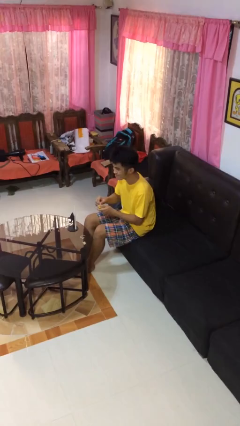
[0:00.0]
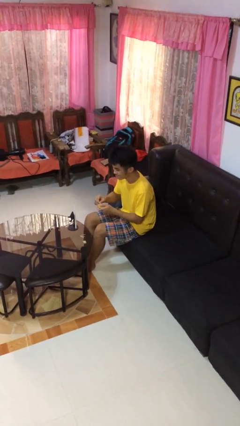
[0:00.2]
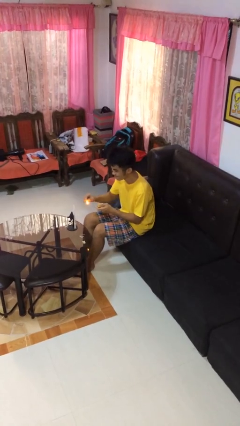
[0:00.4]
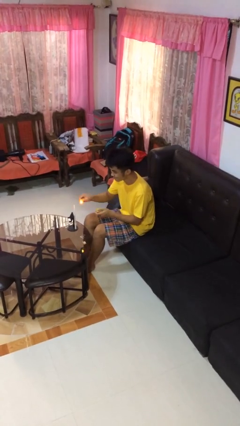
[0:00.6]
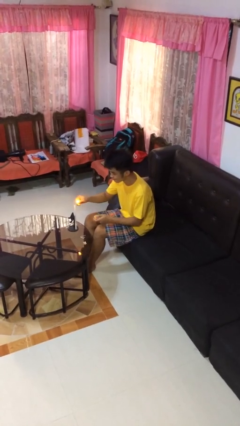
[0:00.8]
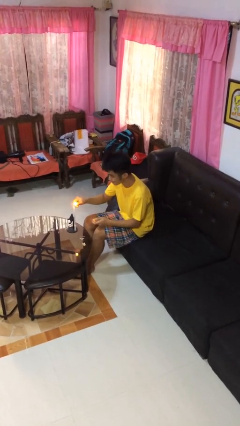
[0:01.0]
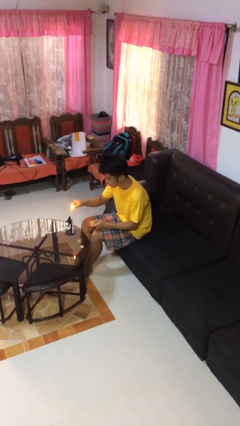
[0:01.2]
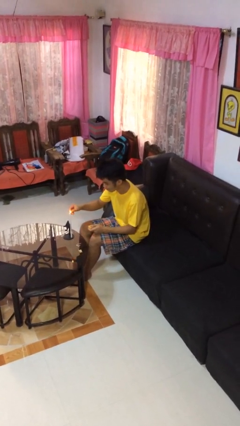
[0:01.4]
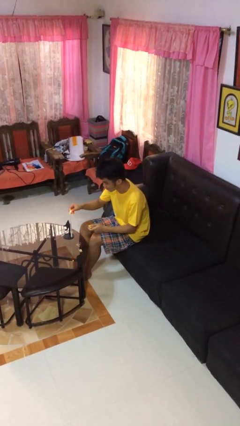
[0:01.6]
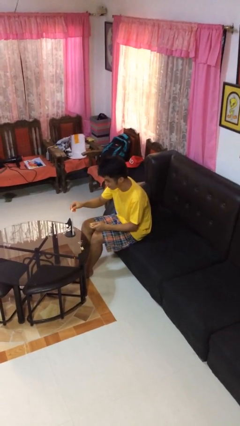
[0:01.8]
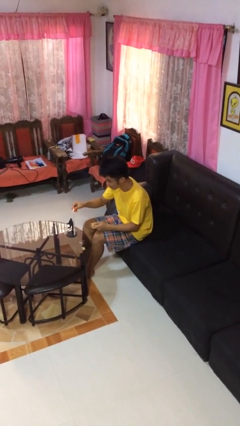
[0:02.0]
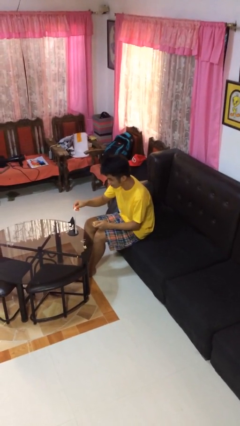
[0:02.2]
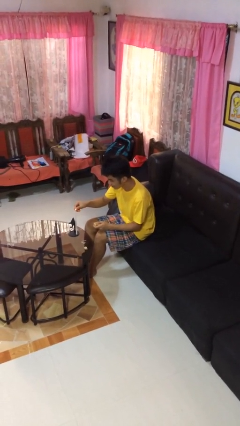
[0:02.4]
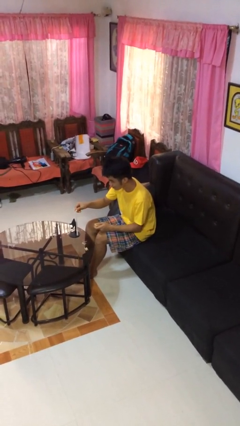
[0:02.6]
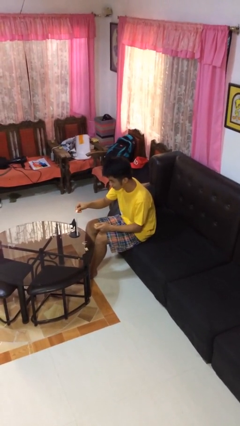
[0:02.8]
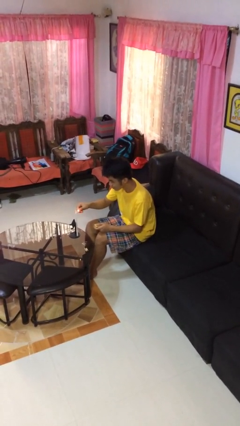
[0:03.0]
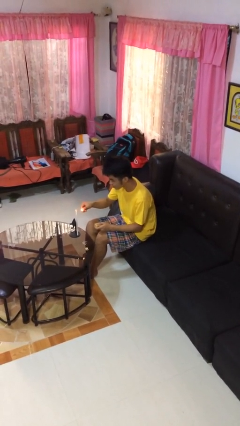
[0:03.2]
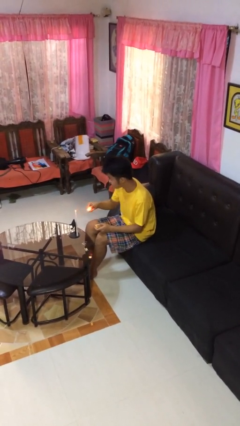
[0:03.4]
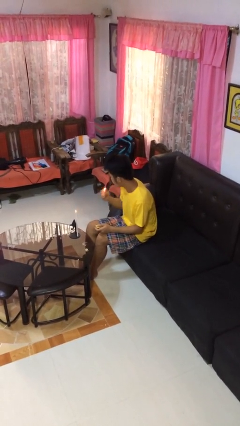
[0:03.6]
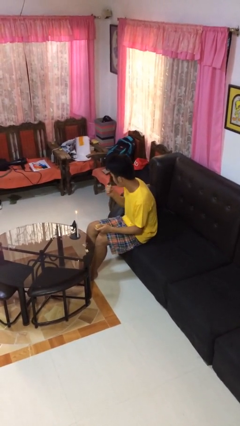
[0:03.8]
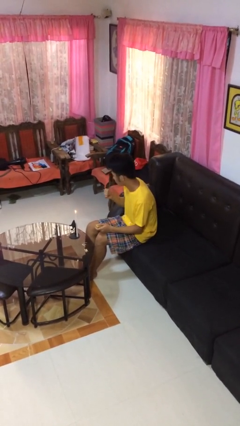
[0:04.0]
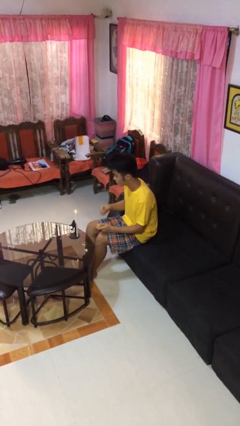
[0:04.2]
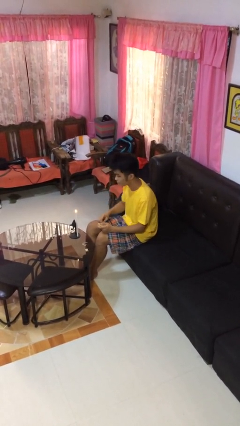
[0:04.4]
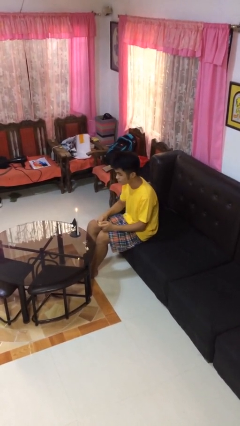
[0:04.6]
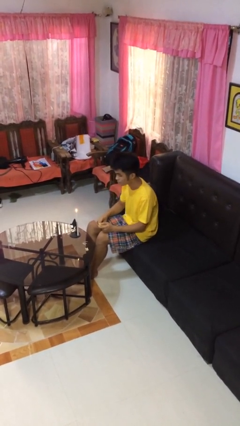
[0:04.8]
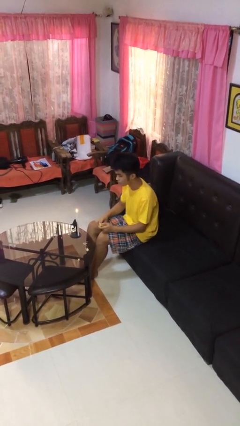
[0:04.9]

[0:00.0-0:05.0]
person lights candle

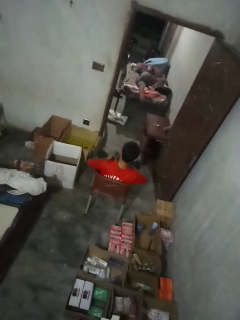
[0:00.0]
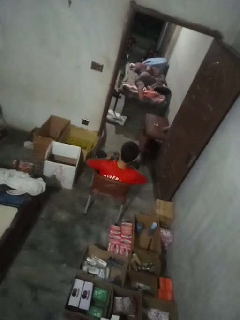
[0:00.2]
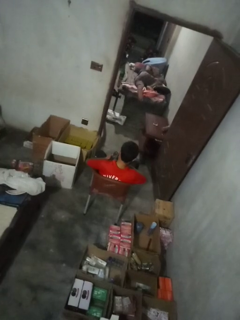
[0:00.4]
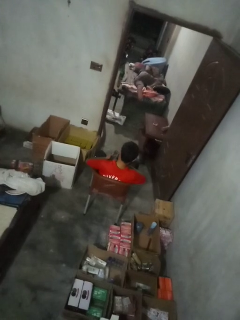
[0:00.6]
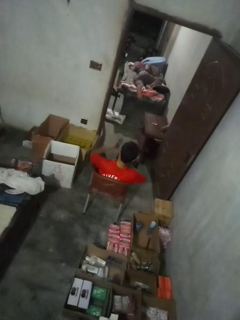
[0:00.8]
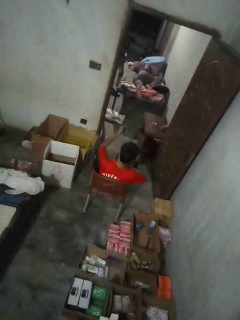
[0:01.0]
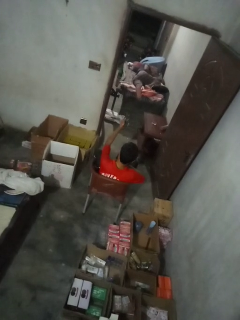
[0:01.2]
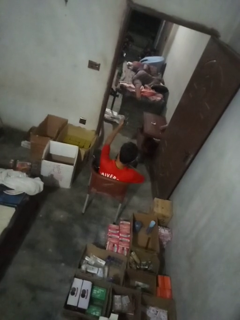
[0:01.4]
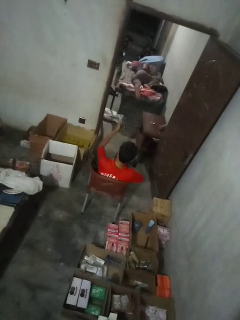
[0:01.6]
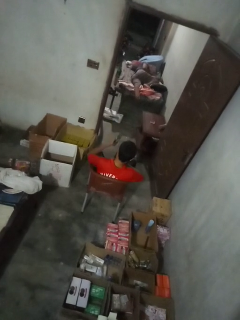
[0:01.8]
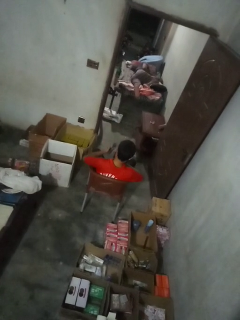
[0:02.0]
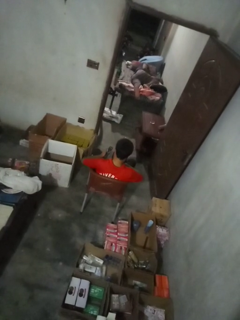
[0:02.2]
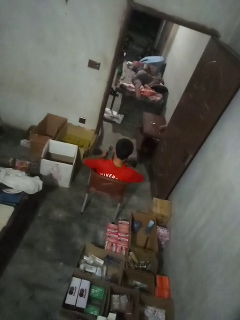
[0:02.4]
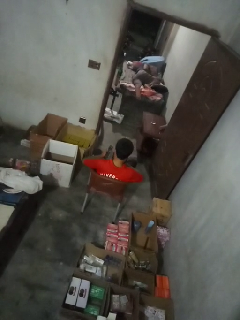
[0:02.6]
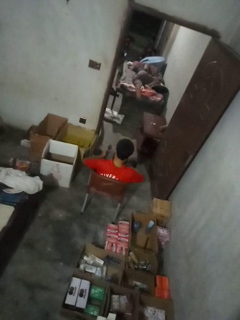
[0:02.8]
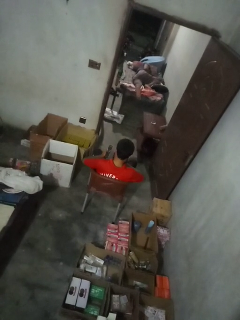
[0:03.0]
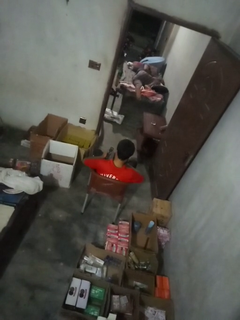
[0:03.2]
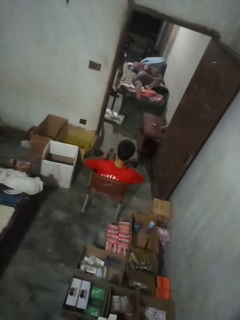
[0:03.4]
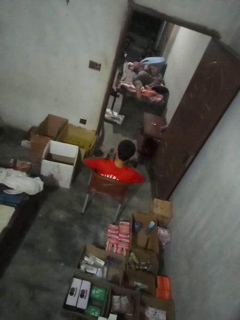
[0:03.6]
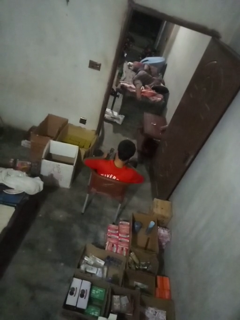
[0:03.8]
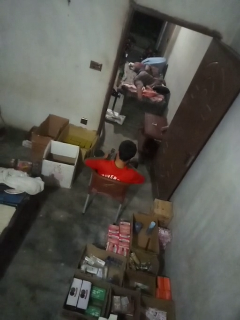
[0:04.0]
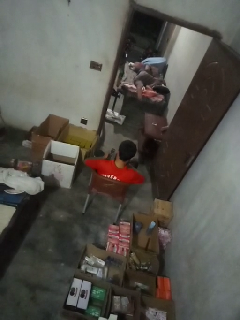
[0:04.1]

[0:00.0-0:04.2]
person uses television remote

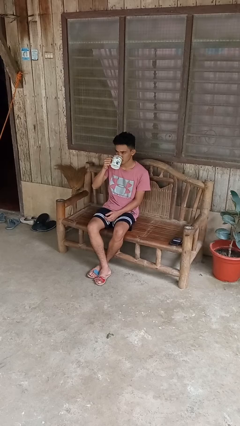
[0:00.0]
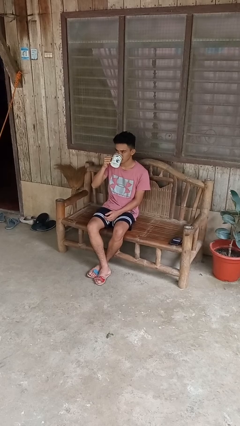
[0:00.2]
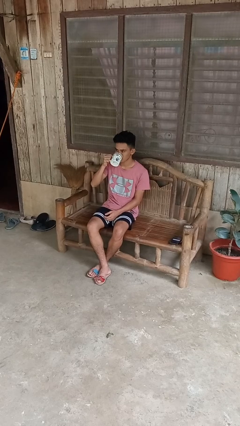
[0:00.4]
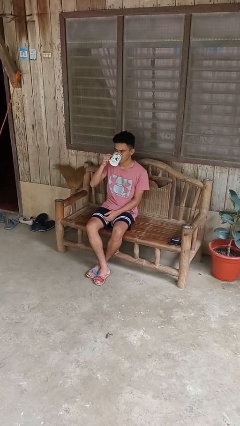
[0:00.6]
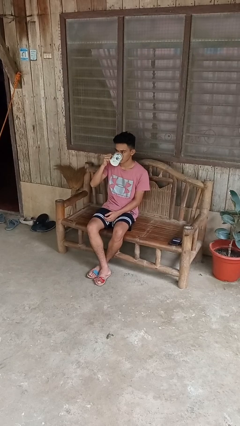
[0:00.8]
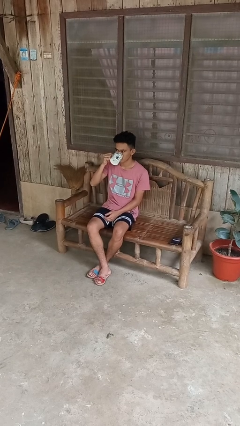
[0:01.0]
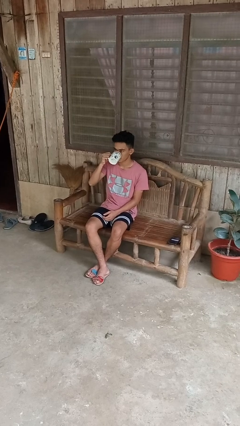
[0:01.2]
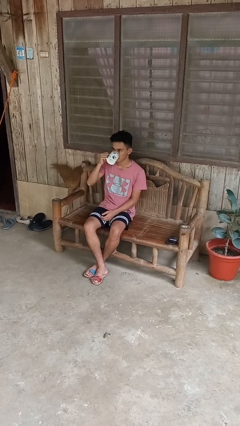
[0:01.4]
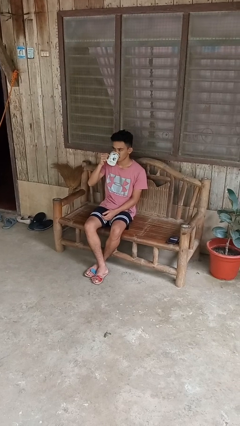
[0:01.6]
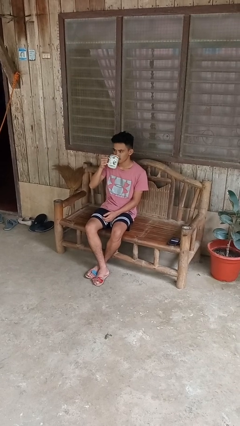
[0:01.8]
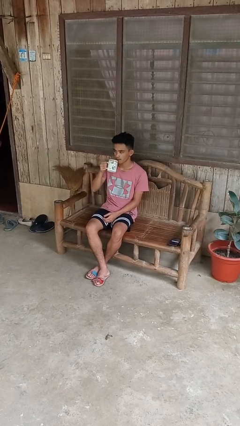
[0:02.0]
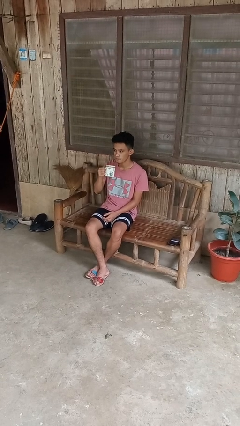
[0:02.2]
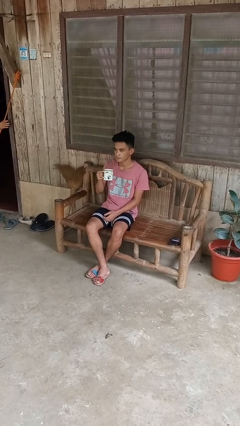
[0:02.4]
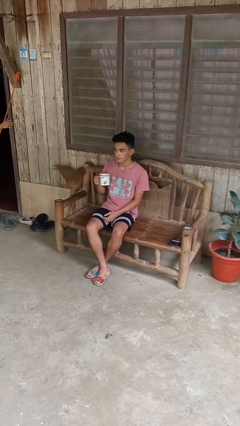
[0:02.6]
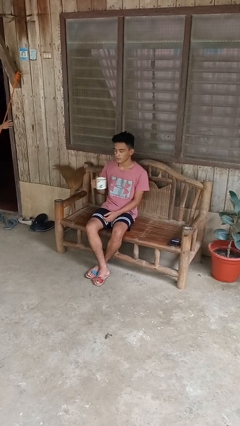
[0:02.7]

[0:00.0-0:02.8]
person drinks from mug

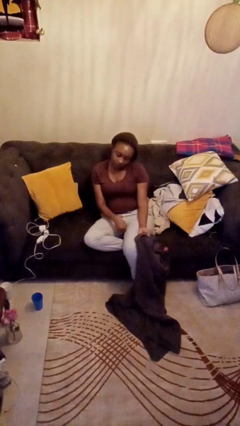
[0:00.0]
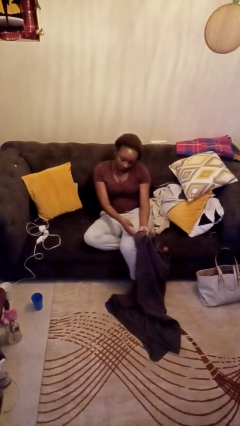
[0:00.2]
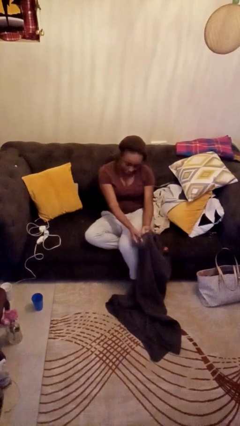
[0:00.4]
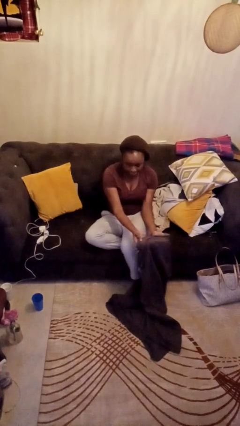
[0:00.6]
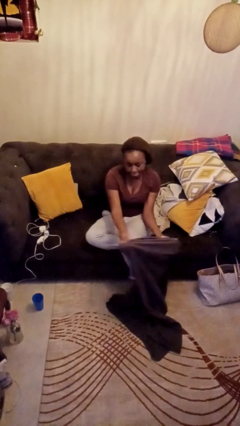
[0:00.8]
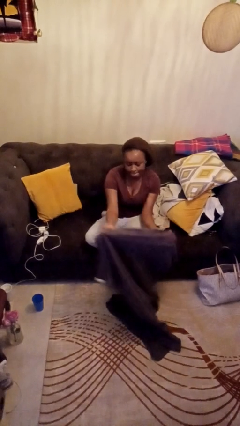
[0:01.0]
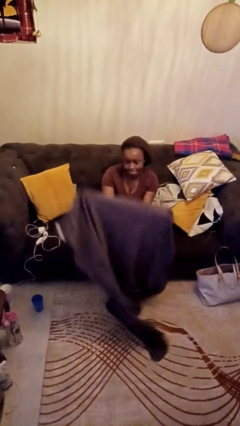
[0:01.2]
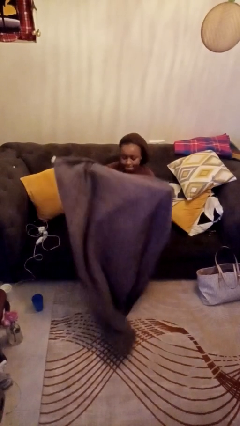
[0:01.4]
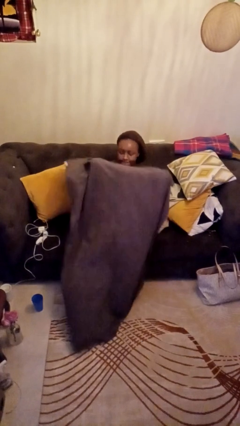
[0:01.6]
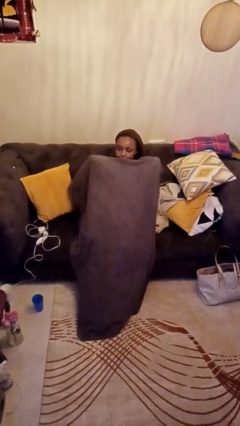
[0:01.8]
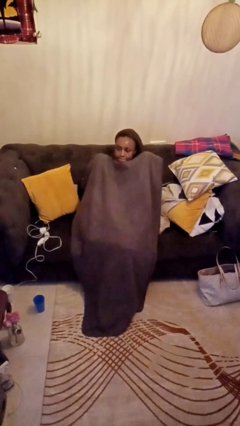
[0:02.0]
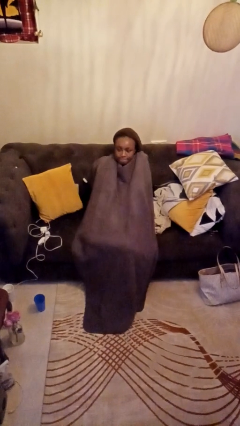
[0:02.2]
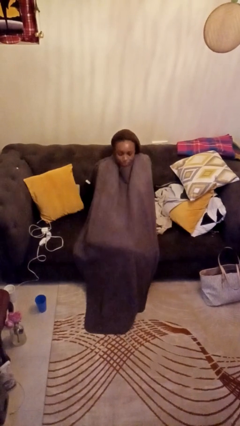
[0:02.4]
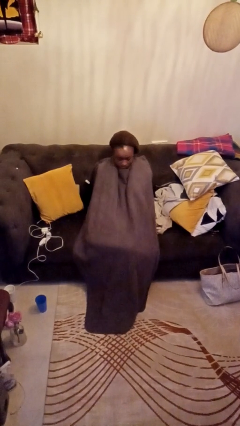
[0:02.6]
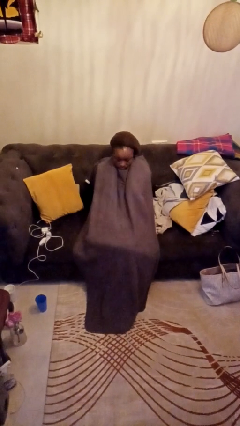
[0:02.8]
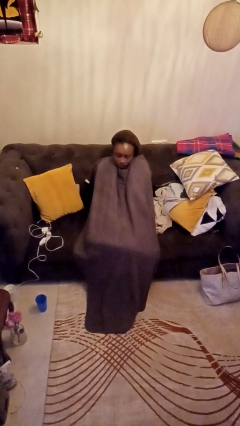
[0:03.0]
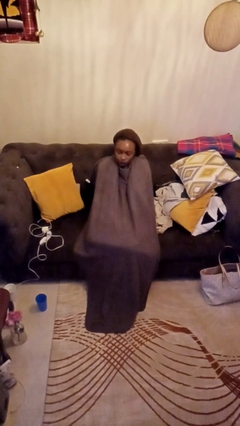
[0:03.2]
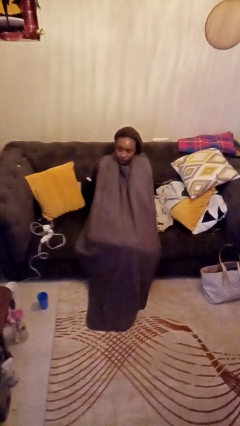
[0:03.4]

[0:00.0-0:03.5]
person covers with blanket

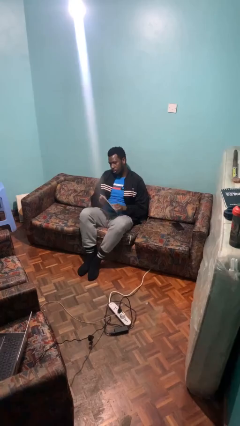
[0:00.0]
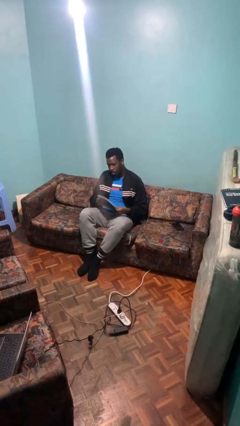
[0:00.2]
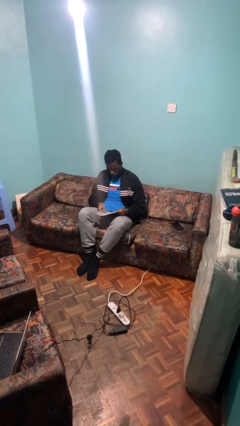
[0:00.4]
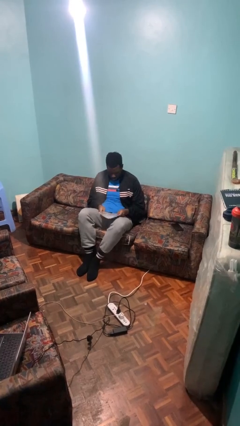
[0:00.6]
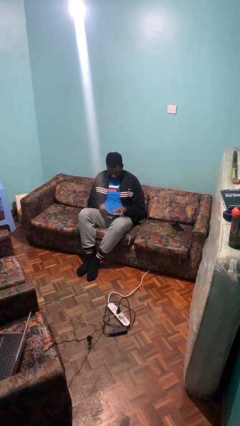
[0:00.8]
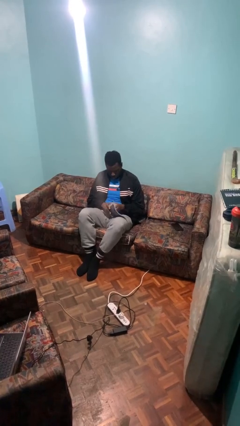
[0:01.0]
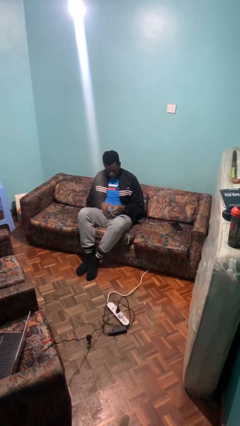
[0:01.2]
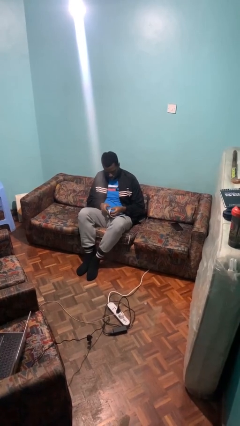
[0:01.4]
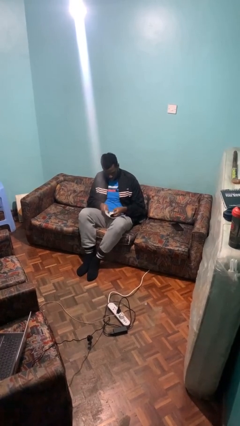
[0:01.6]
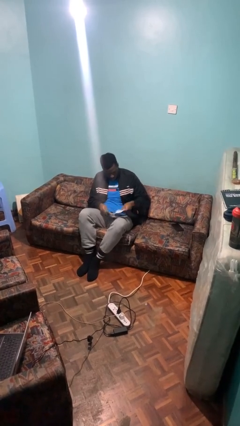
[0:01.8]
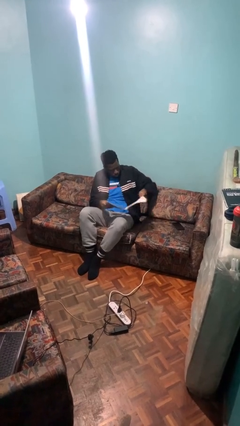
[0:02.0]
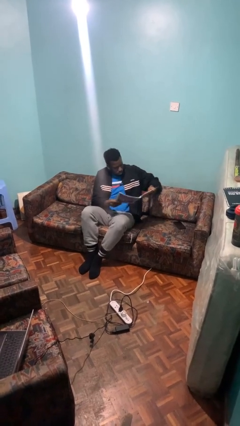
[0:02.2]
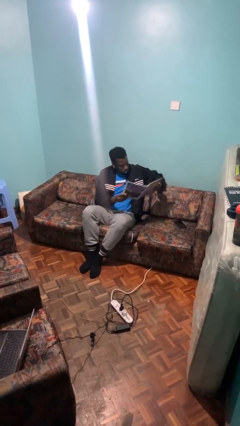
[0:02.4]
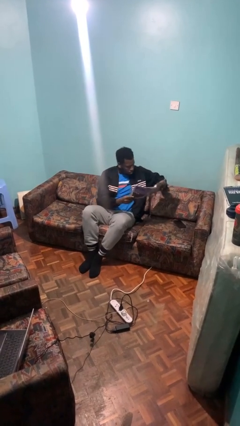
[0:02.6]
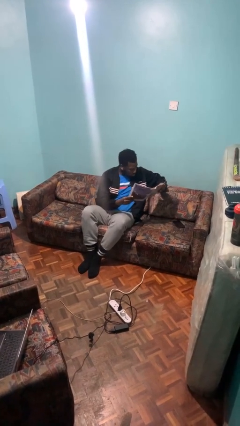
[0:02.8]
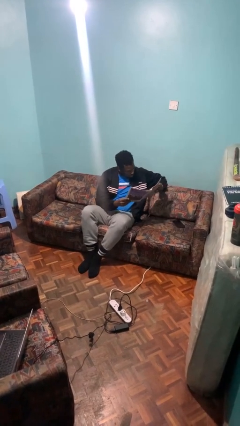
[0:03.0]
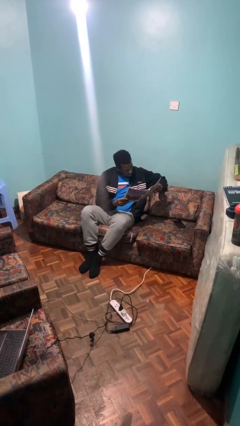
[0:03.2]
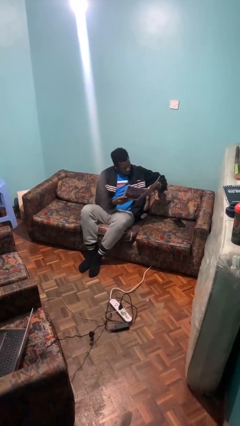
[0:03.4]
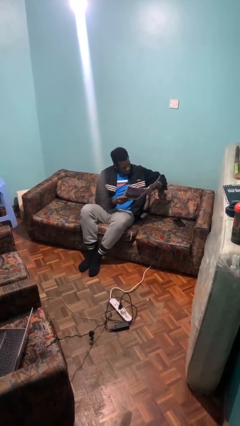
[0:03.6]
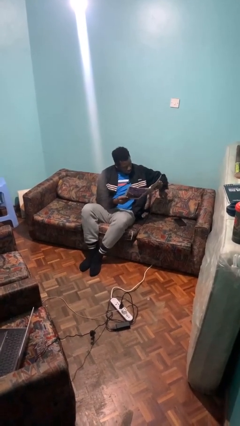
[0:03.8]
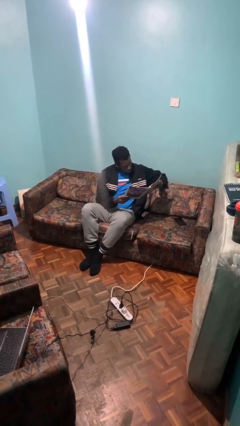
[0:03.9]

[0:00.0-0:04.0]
person reads magazine
